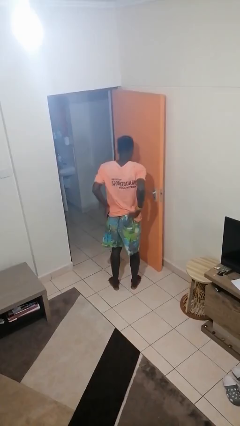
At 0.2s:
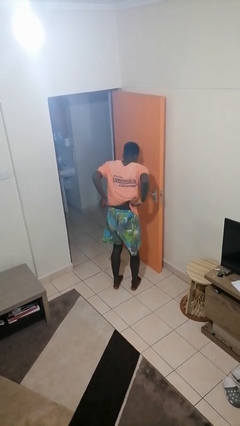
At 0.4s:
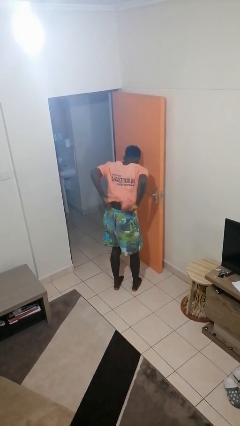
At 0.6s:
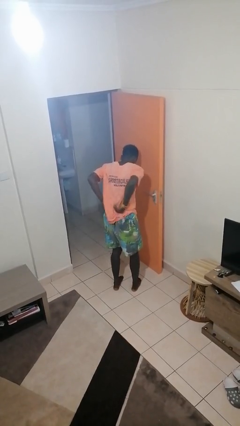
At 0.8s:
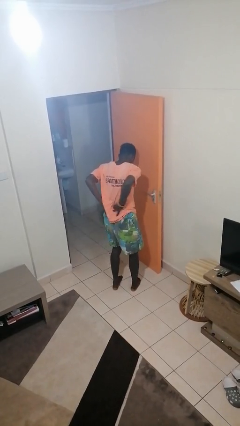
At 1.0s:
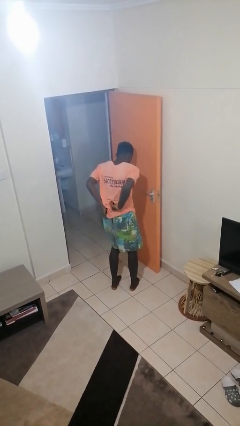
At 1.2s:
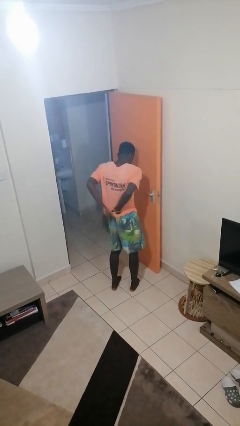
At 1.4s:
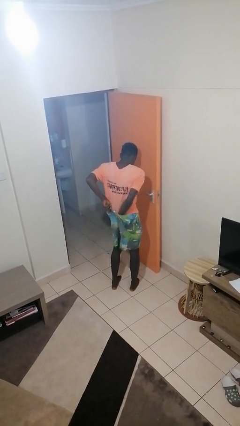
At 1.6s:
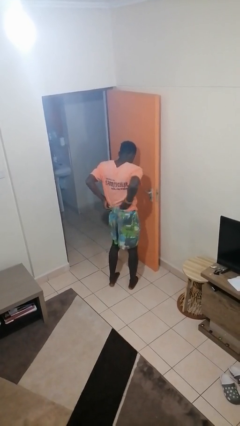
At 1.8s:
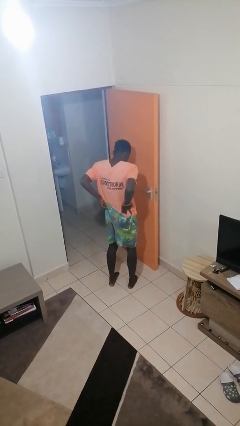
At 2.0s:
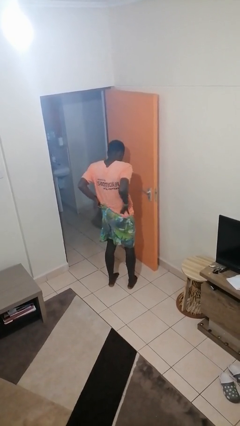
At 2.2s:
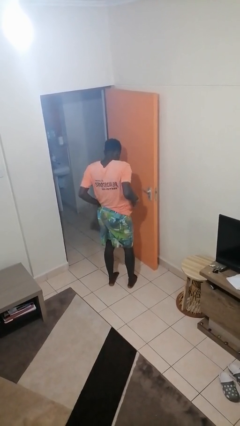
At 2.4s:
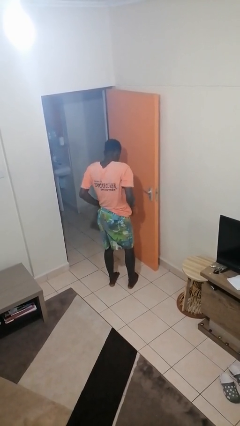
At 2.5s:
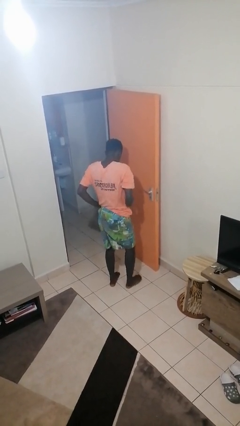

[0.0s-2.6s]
person tucks in shirt

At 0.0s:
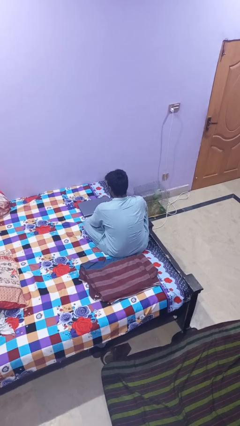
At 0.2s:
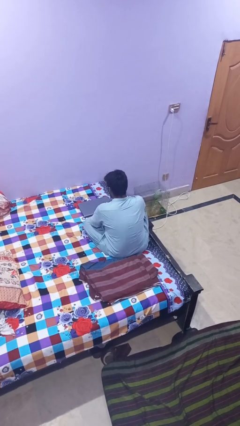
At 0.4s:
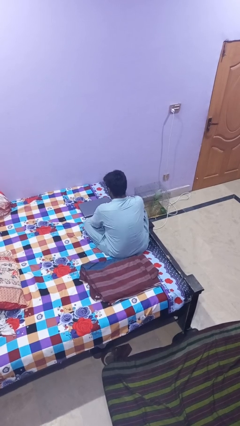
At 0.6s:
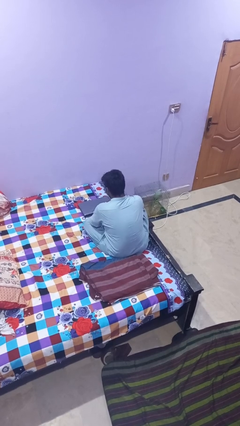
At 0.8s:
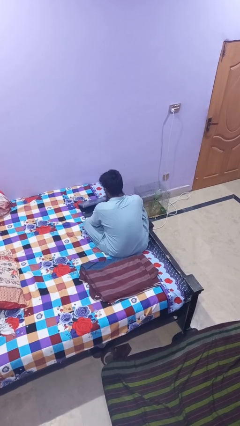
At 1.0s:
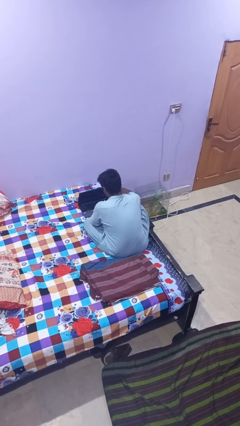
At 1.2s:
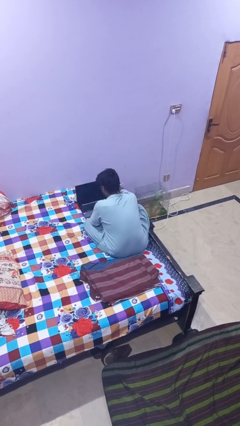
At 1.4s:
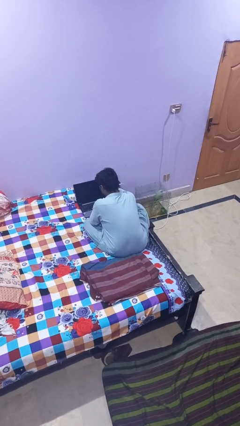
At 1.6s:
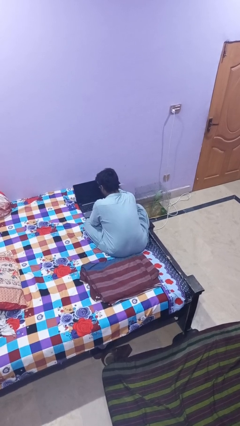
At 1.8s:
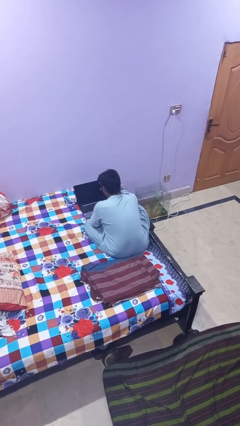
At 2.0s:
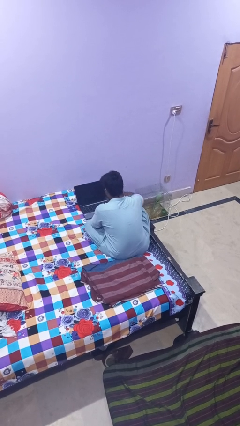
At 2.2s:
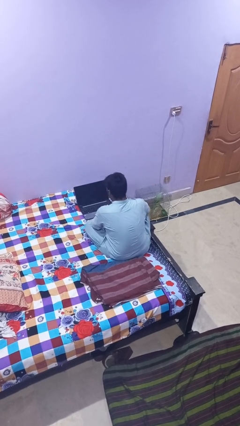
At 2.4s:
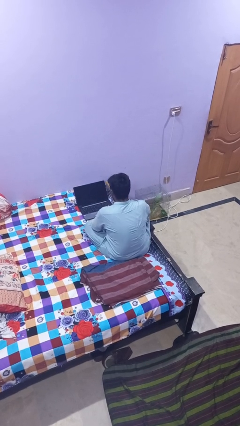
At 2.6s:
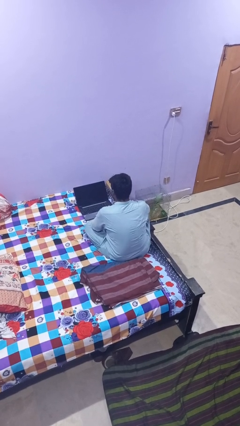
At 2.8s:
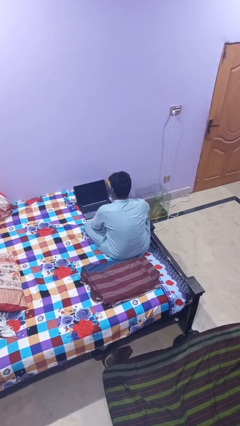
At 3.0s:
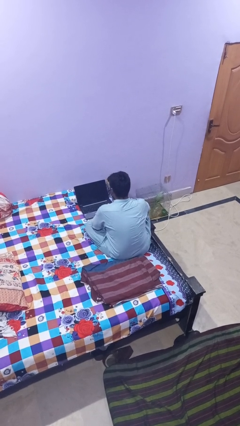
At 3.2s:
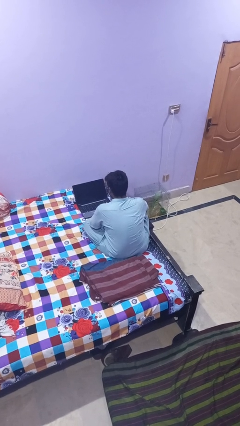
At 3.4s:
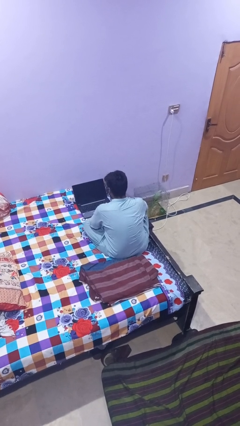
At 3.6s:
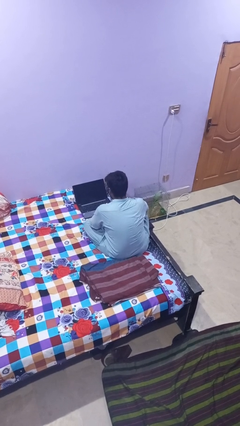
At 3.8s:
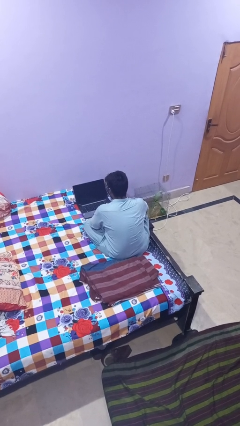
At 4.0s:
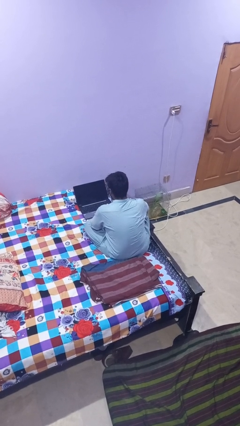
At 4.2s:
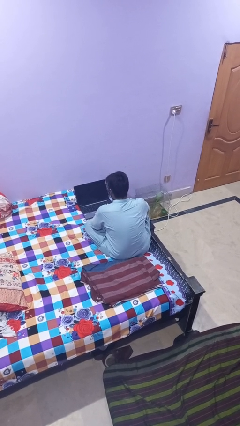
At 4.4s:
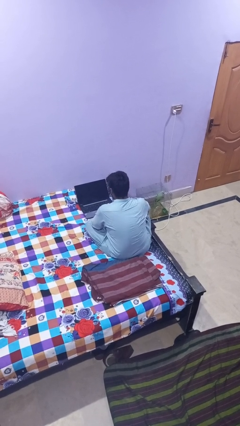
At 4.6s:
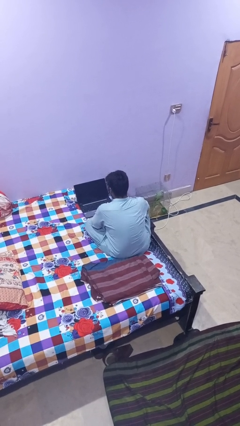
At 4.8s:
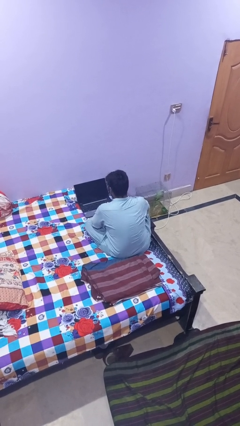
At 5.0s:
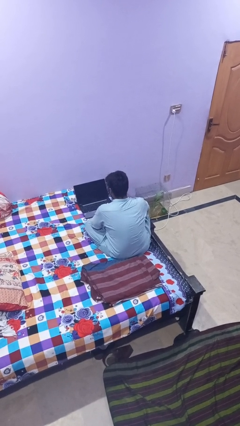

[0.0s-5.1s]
person opens laptop

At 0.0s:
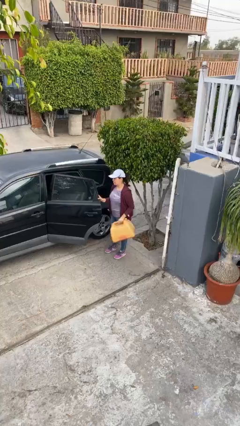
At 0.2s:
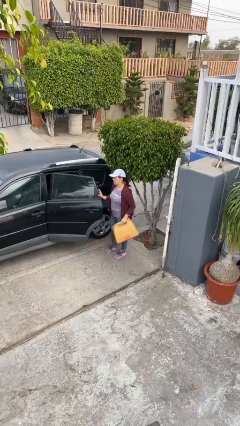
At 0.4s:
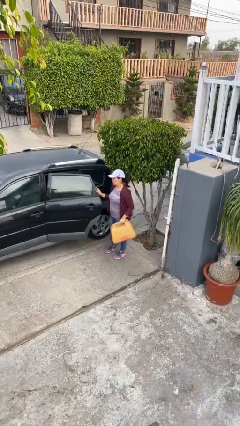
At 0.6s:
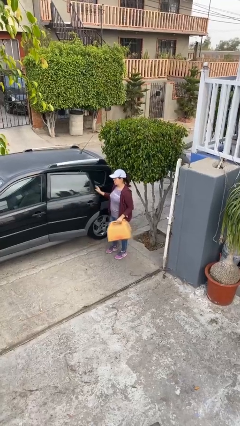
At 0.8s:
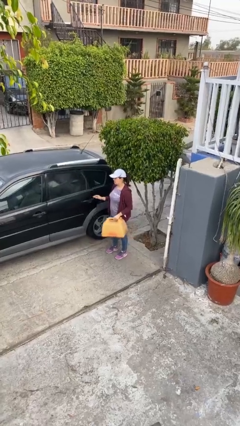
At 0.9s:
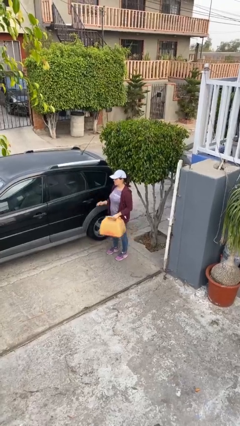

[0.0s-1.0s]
person closes car door

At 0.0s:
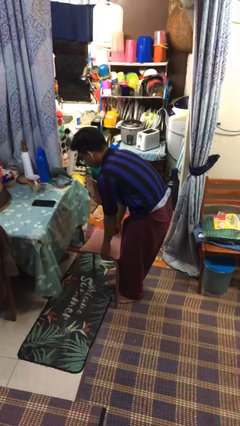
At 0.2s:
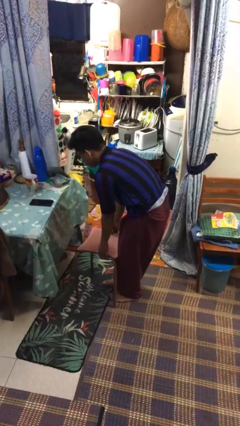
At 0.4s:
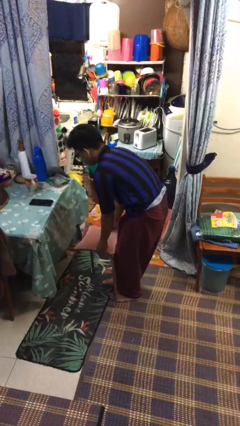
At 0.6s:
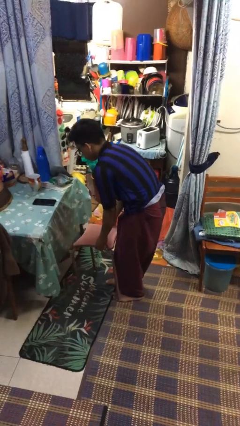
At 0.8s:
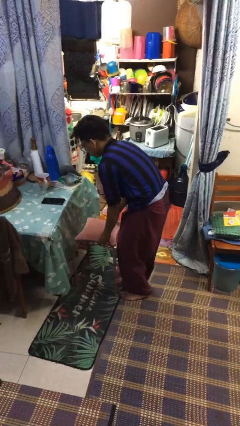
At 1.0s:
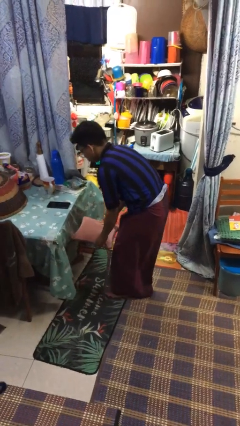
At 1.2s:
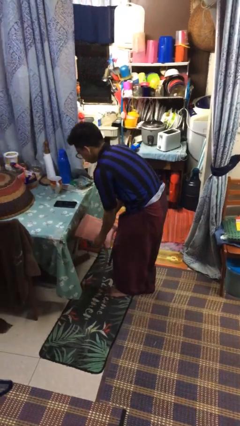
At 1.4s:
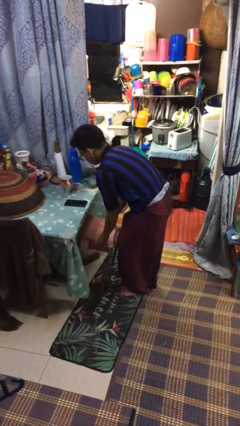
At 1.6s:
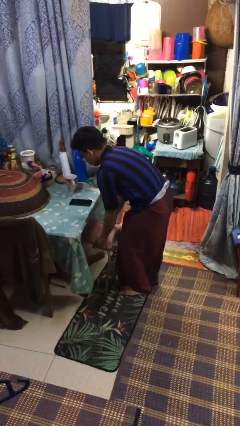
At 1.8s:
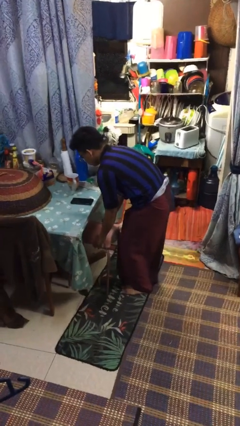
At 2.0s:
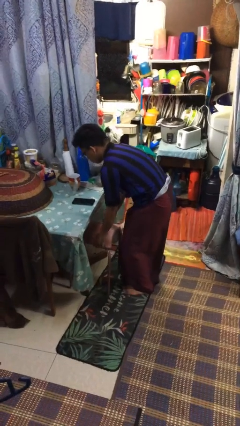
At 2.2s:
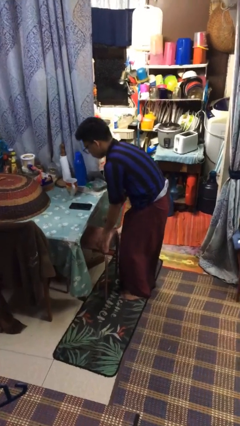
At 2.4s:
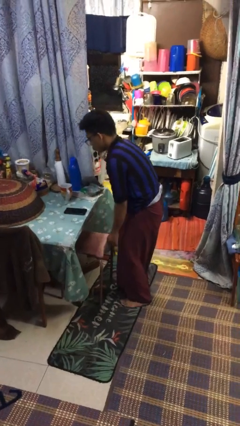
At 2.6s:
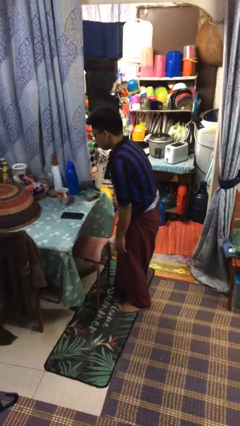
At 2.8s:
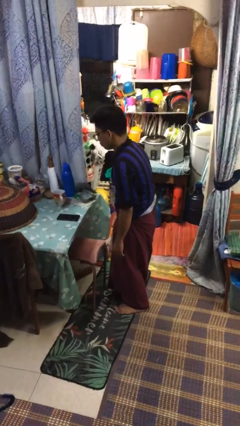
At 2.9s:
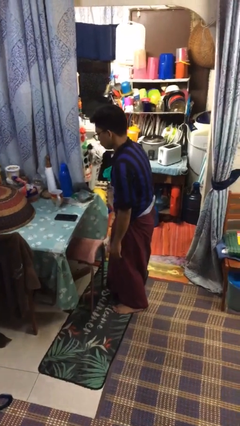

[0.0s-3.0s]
person pushes in chair

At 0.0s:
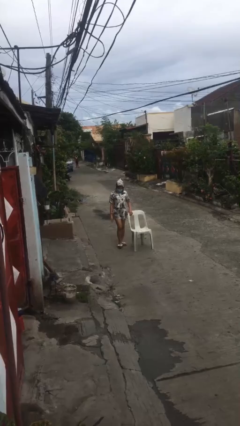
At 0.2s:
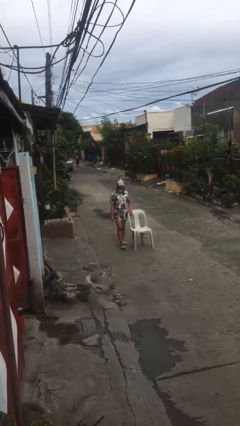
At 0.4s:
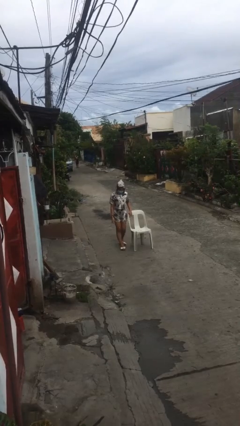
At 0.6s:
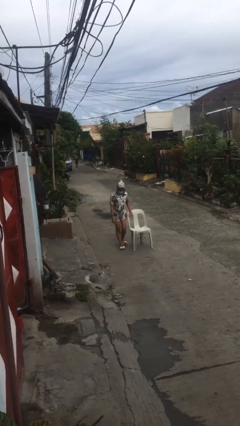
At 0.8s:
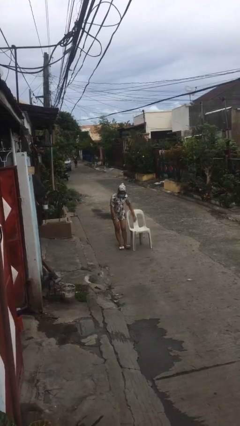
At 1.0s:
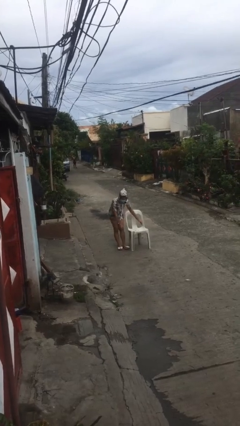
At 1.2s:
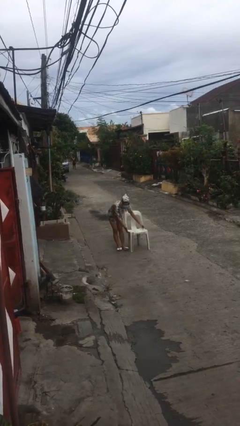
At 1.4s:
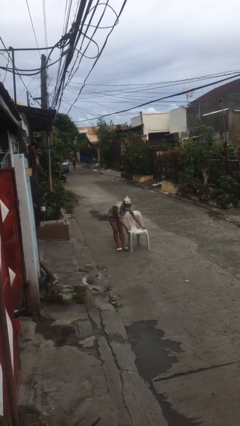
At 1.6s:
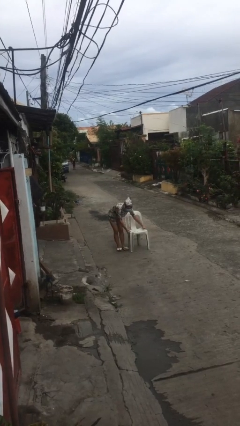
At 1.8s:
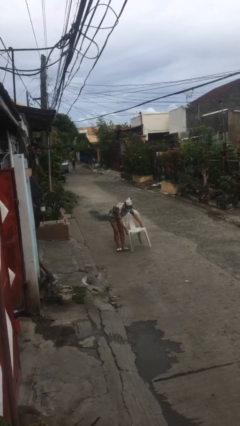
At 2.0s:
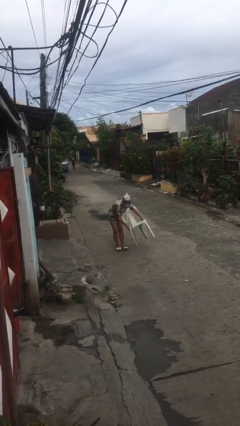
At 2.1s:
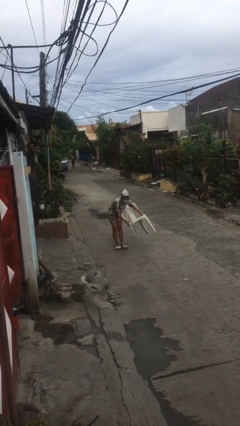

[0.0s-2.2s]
person picks up object from floor

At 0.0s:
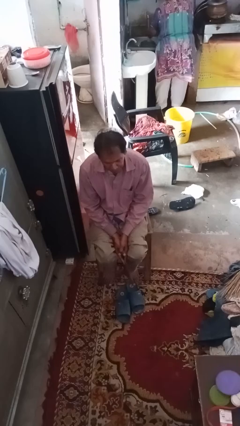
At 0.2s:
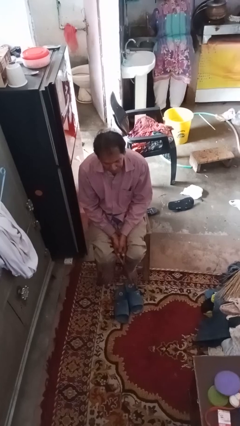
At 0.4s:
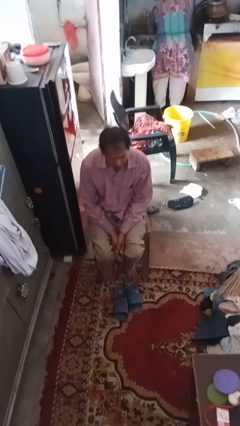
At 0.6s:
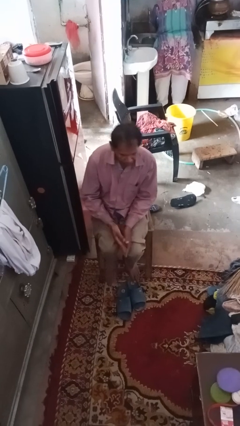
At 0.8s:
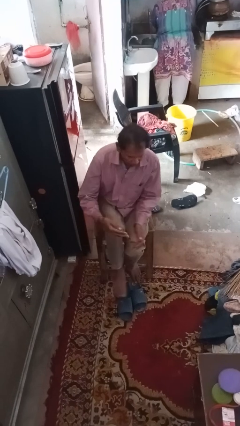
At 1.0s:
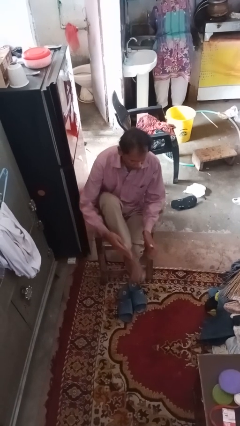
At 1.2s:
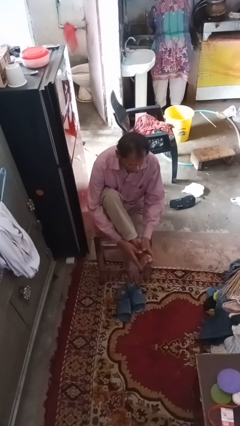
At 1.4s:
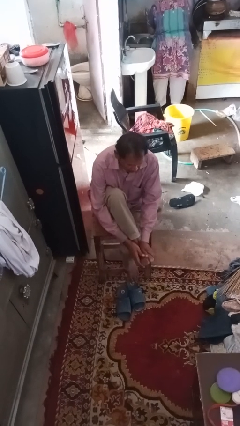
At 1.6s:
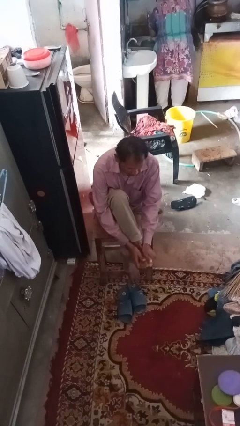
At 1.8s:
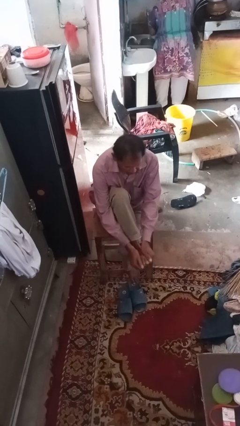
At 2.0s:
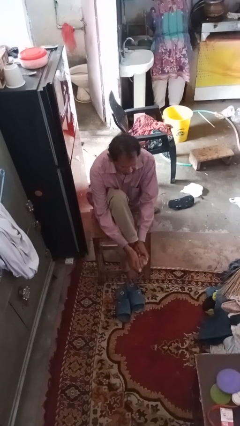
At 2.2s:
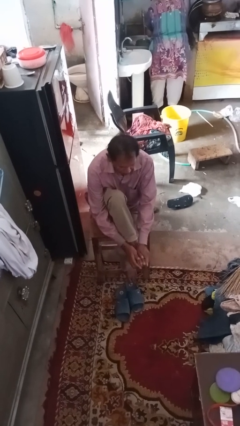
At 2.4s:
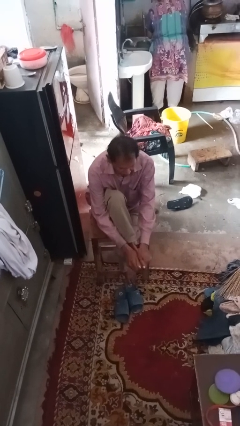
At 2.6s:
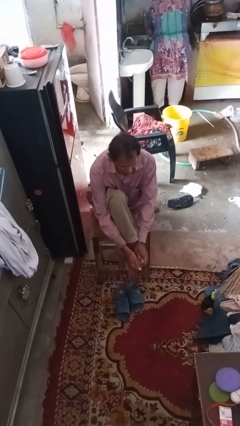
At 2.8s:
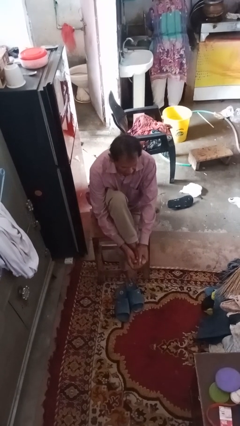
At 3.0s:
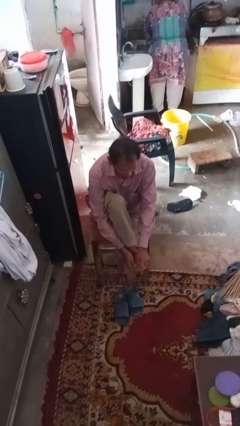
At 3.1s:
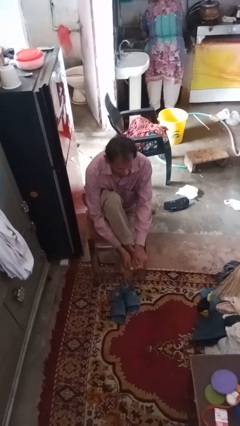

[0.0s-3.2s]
person rubs foot

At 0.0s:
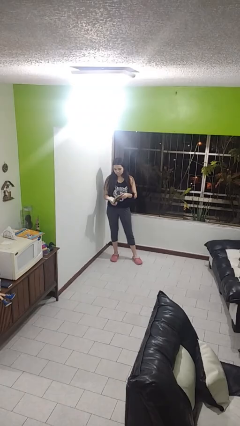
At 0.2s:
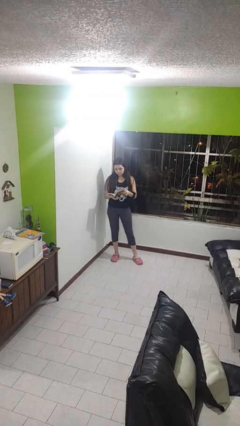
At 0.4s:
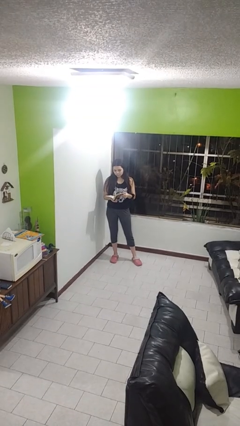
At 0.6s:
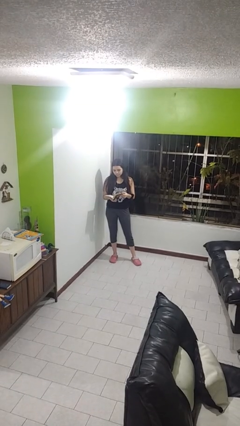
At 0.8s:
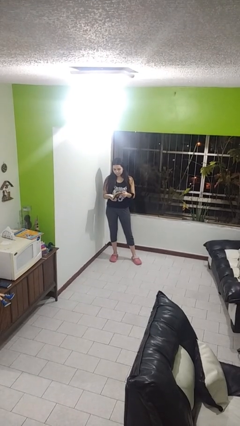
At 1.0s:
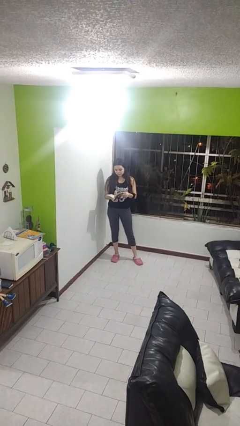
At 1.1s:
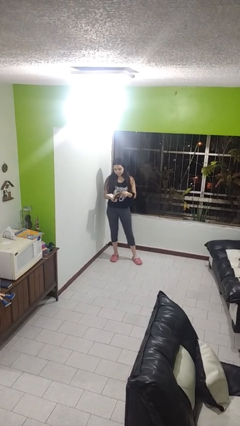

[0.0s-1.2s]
person reads book
